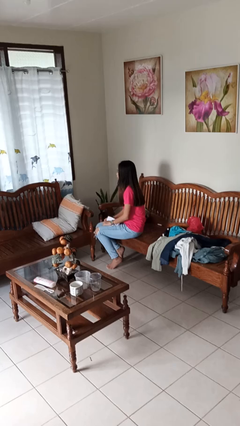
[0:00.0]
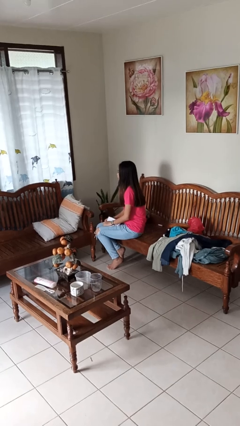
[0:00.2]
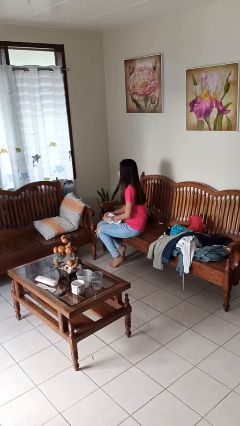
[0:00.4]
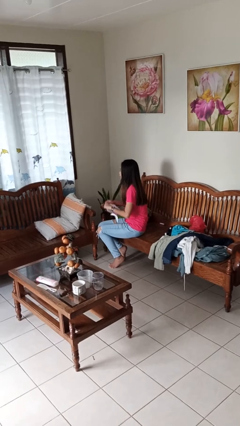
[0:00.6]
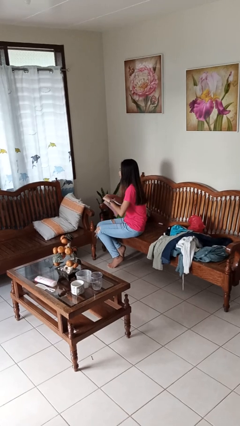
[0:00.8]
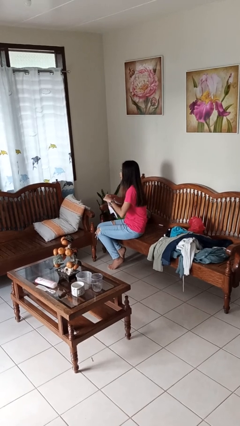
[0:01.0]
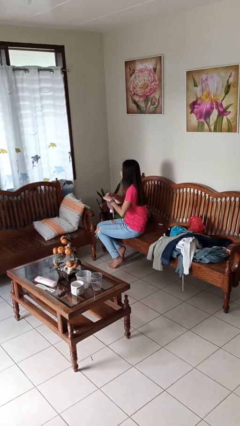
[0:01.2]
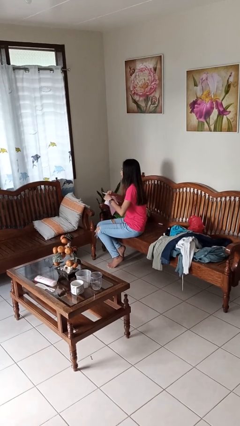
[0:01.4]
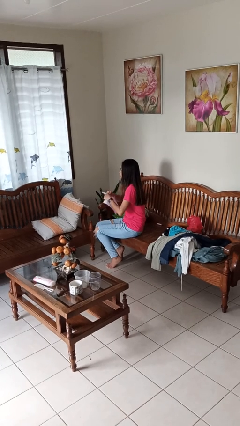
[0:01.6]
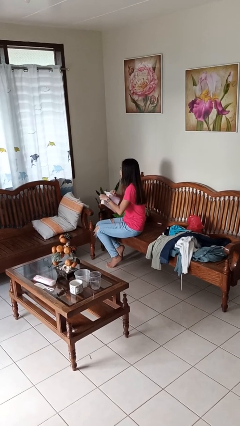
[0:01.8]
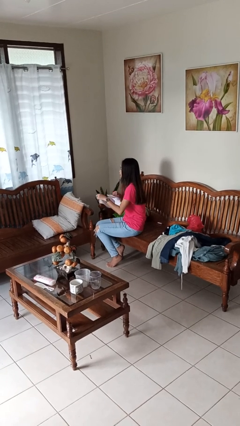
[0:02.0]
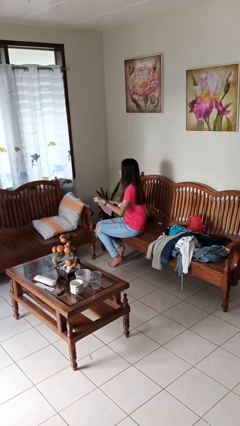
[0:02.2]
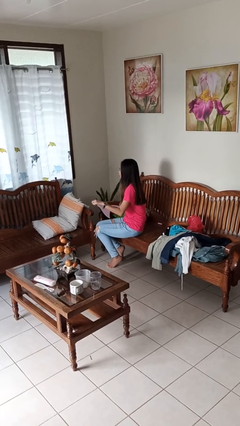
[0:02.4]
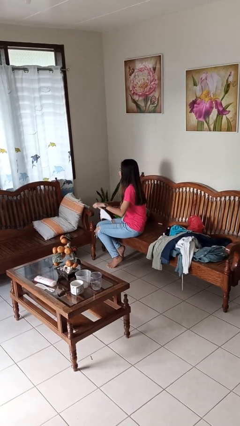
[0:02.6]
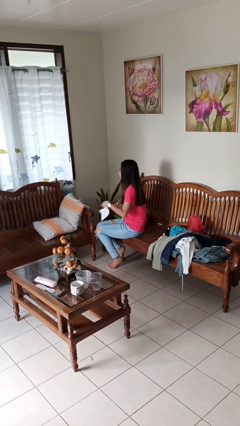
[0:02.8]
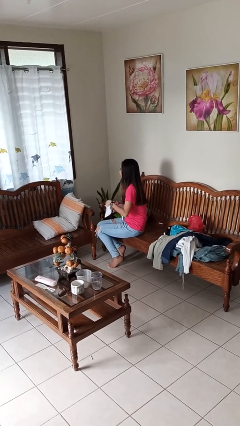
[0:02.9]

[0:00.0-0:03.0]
person tears paper

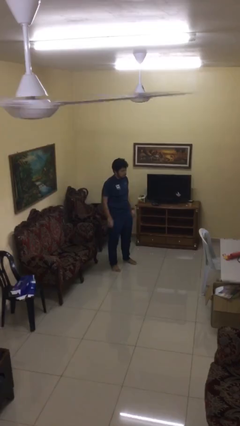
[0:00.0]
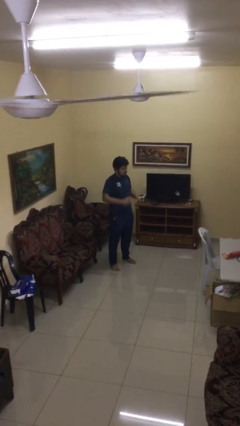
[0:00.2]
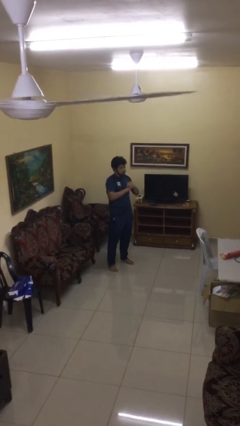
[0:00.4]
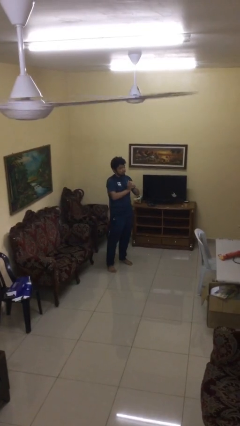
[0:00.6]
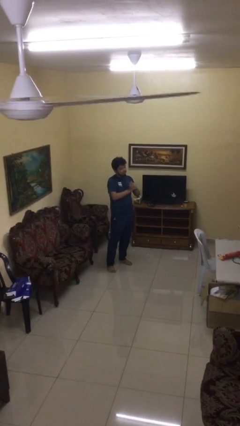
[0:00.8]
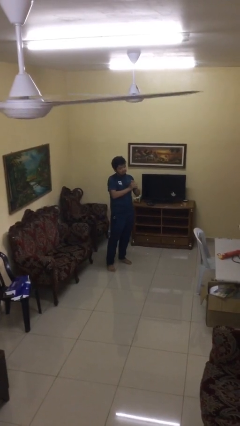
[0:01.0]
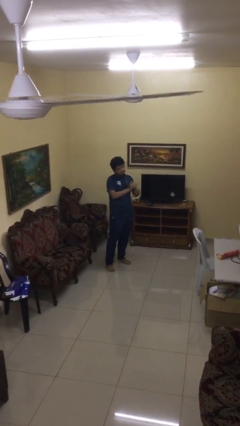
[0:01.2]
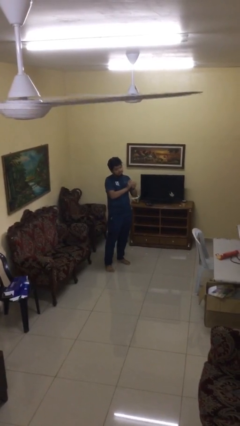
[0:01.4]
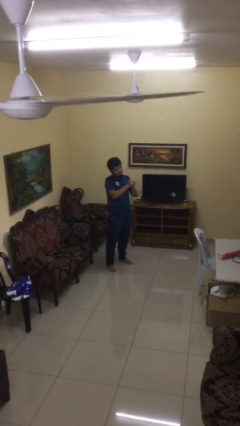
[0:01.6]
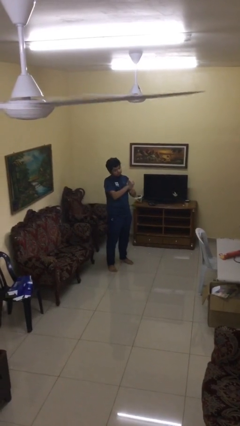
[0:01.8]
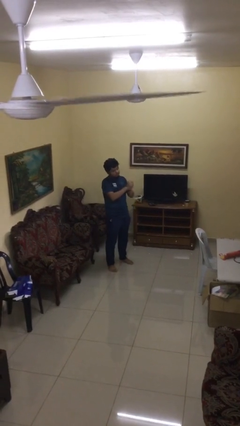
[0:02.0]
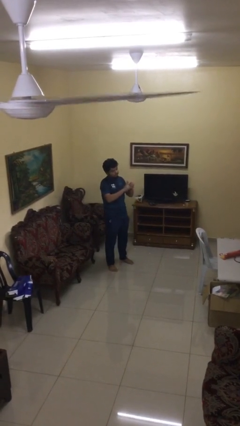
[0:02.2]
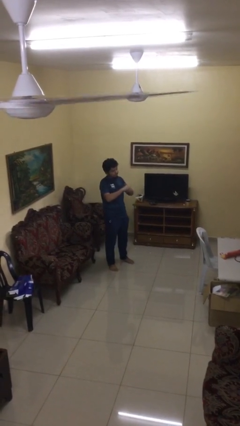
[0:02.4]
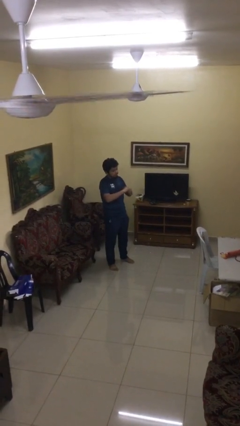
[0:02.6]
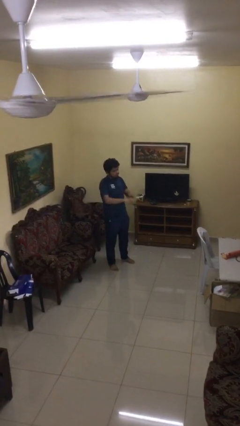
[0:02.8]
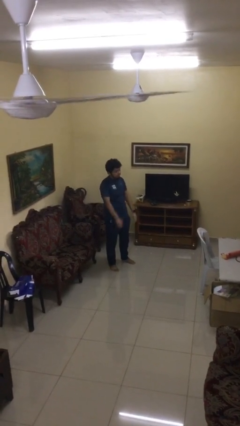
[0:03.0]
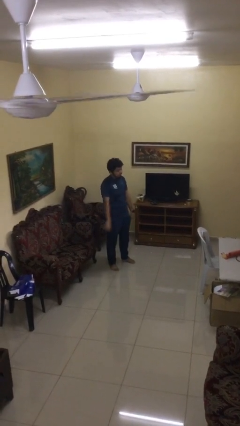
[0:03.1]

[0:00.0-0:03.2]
person cracks knuckles

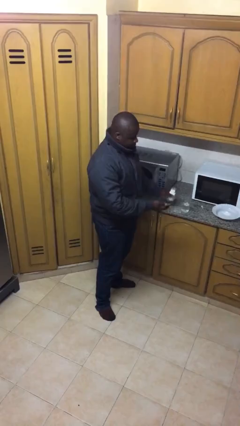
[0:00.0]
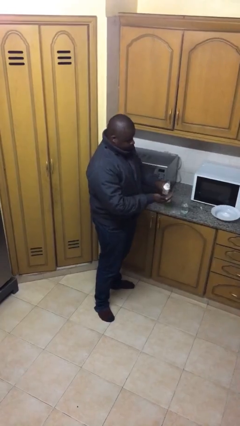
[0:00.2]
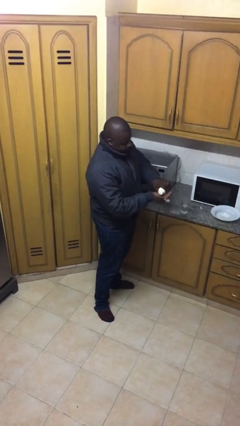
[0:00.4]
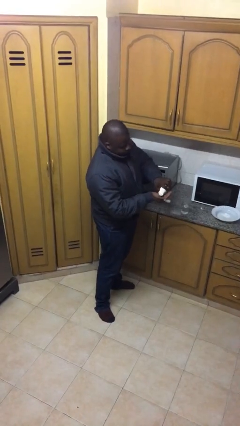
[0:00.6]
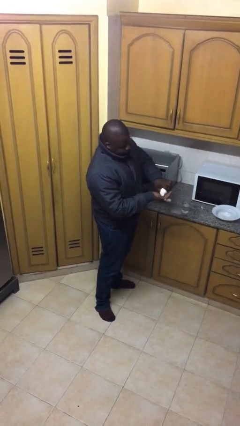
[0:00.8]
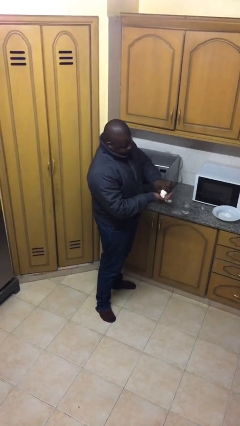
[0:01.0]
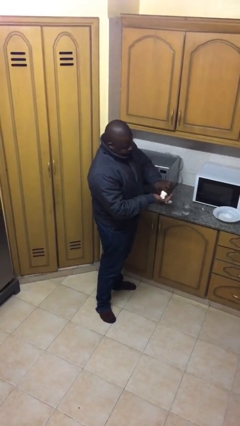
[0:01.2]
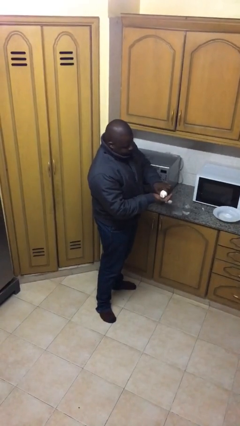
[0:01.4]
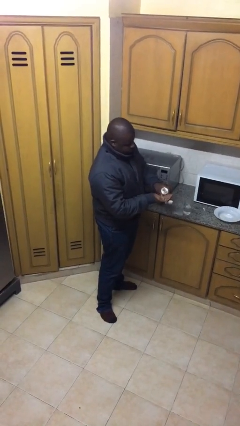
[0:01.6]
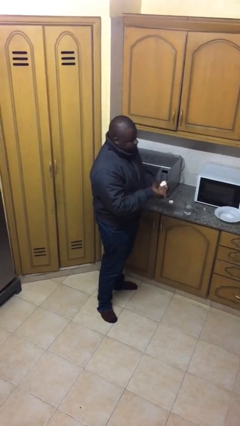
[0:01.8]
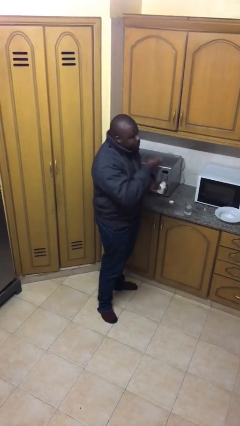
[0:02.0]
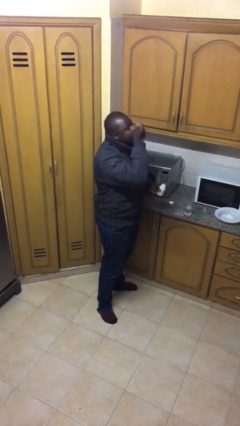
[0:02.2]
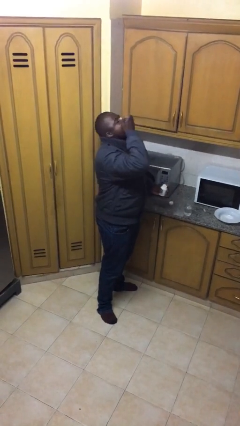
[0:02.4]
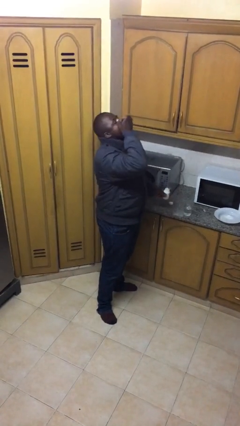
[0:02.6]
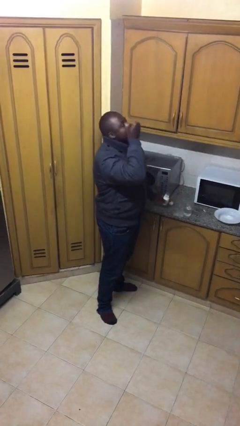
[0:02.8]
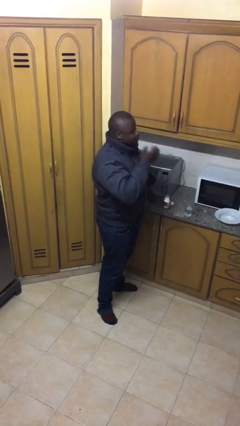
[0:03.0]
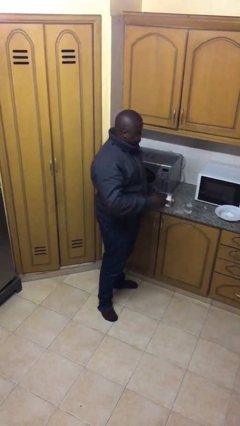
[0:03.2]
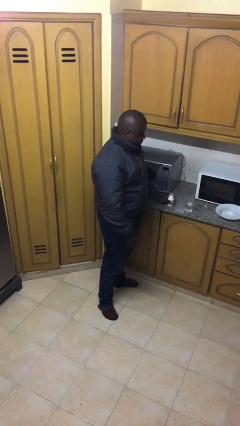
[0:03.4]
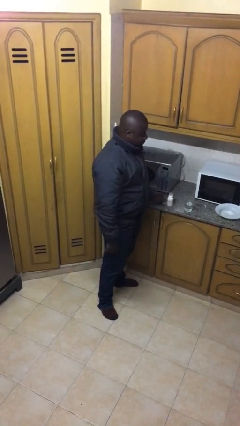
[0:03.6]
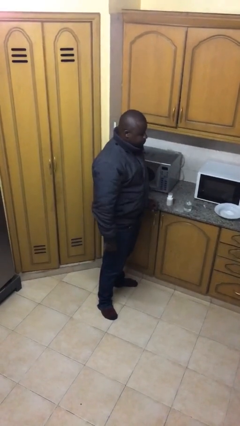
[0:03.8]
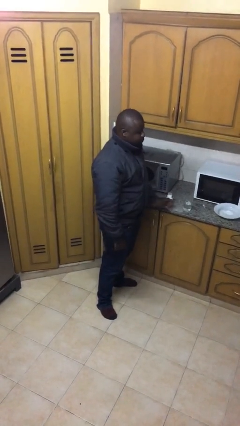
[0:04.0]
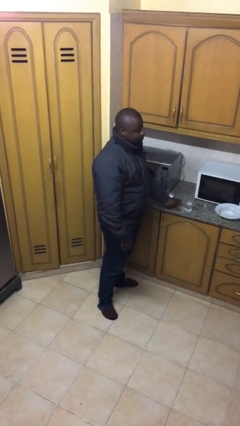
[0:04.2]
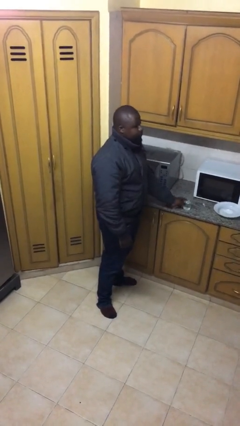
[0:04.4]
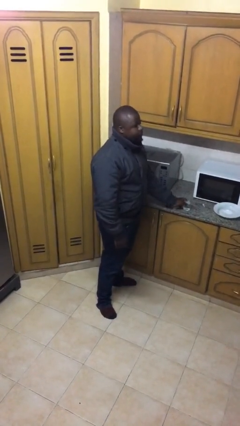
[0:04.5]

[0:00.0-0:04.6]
person takes medicine pills

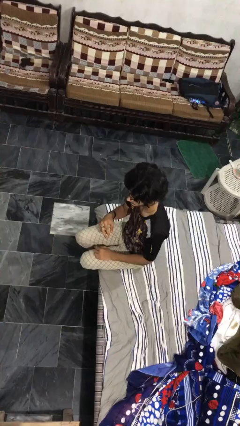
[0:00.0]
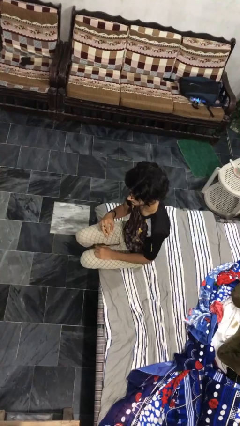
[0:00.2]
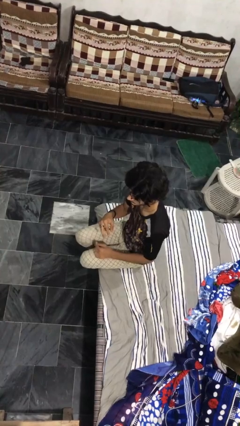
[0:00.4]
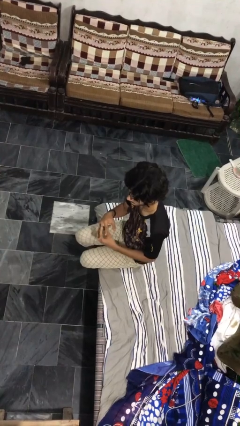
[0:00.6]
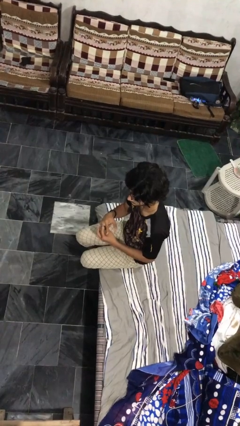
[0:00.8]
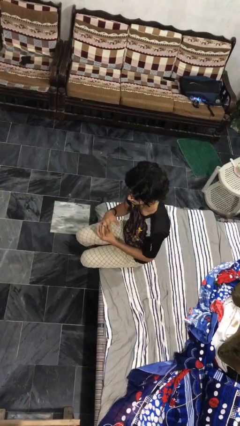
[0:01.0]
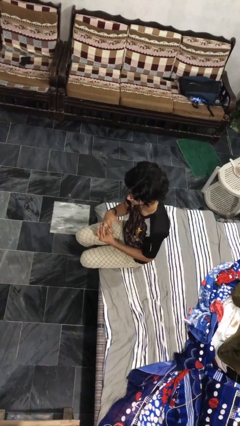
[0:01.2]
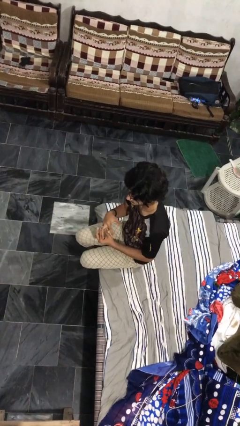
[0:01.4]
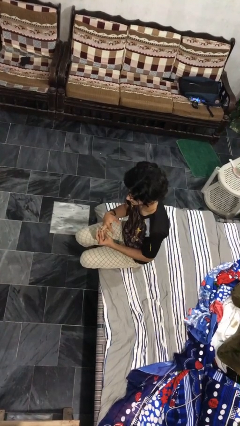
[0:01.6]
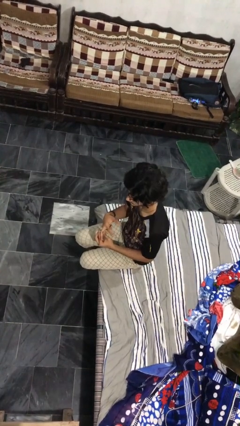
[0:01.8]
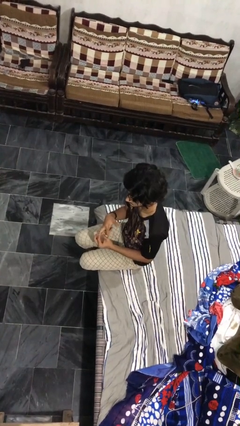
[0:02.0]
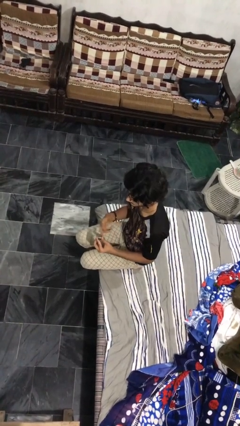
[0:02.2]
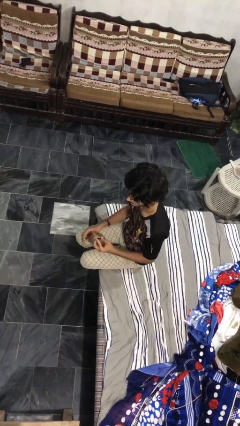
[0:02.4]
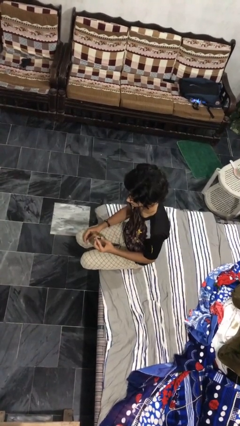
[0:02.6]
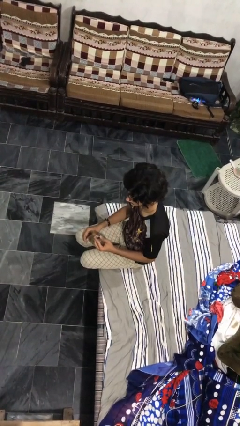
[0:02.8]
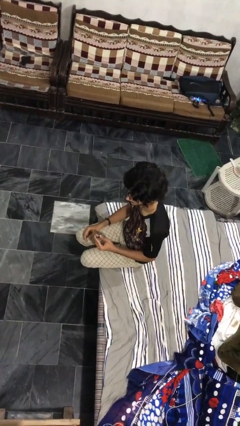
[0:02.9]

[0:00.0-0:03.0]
person takes off ring

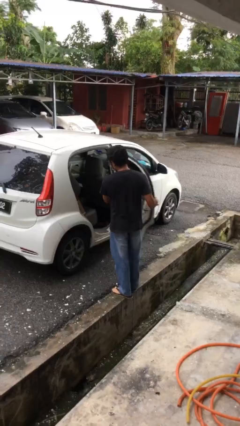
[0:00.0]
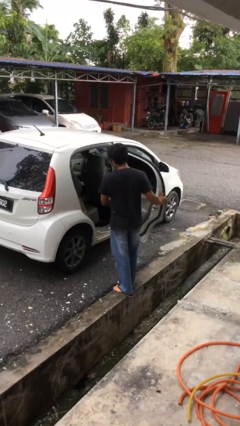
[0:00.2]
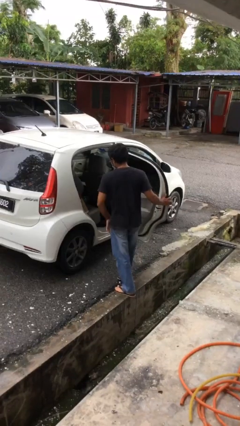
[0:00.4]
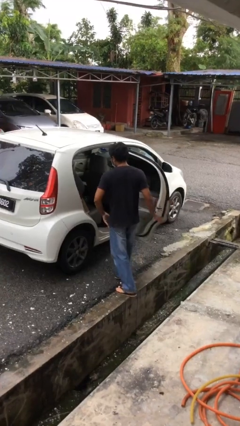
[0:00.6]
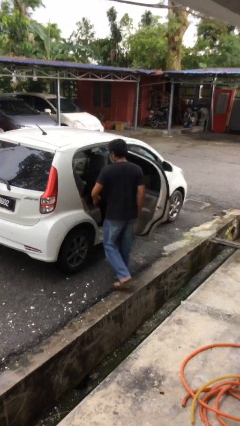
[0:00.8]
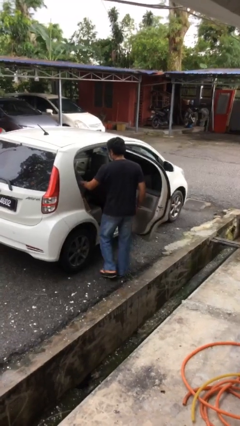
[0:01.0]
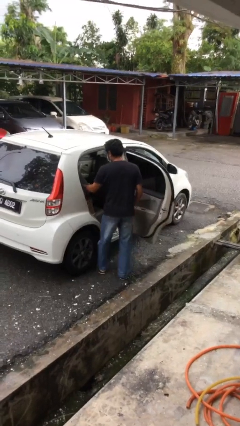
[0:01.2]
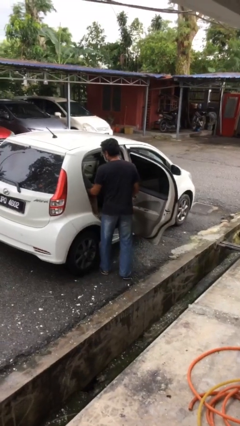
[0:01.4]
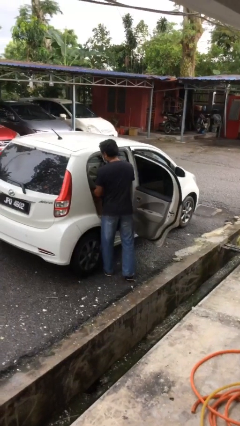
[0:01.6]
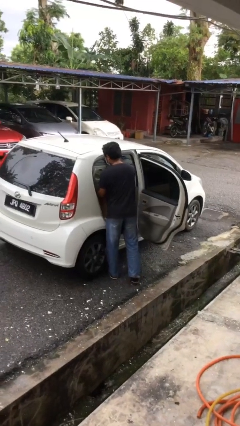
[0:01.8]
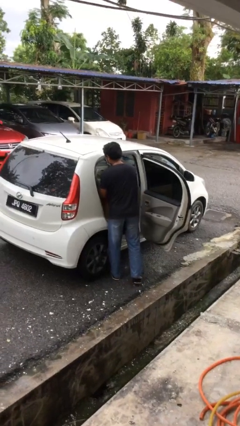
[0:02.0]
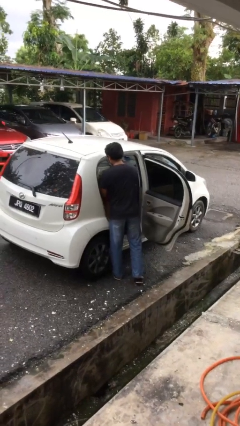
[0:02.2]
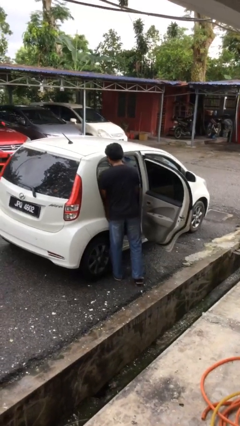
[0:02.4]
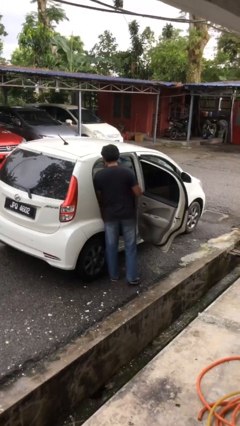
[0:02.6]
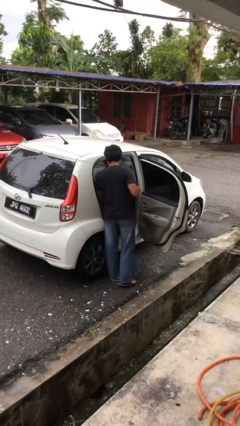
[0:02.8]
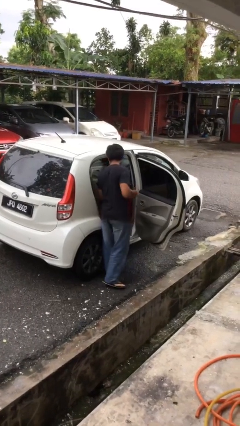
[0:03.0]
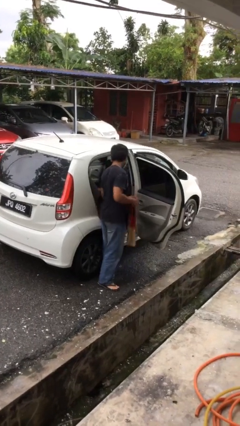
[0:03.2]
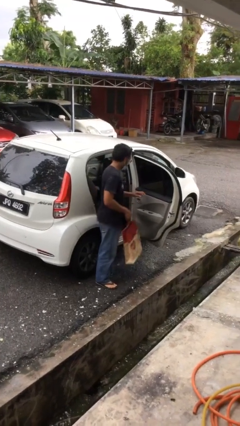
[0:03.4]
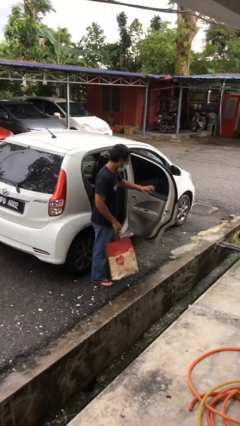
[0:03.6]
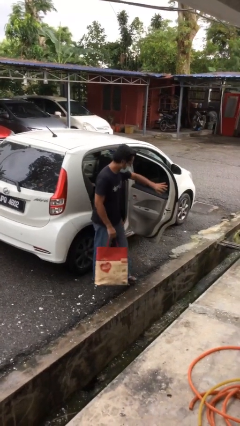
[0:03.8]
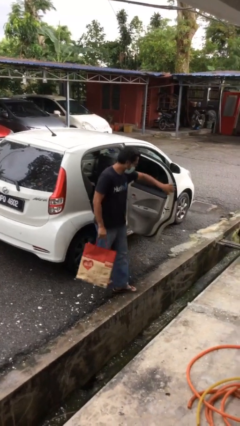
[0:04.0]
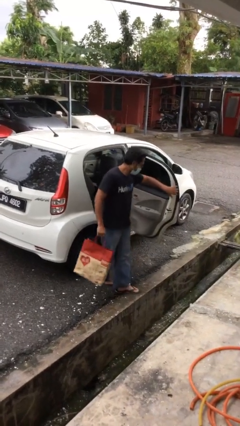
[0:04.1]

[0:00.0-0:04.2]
person unloads car
